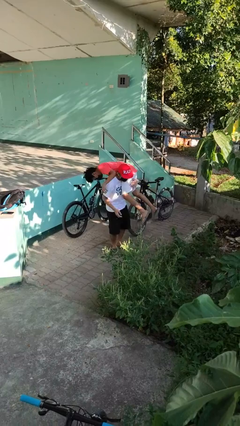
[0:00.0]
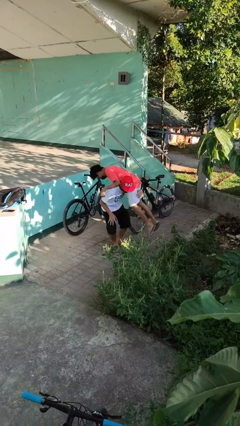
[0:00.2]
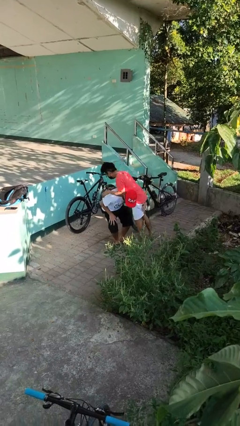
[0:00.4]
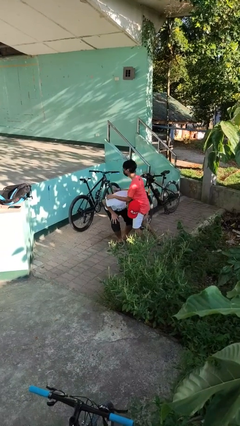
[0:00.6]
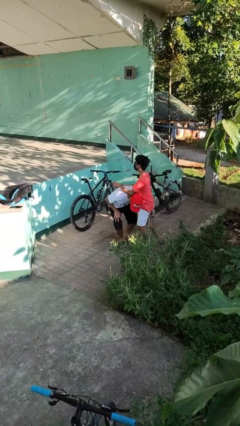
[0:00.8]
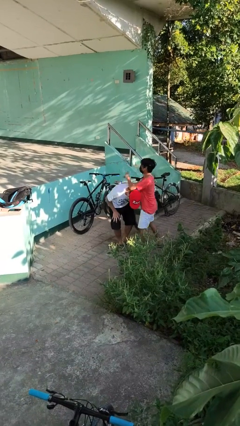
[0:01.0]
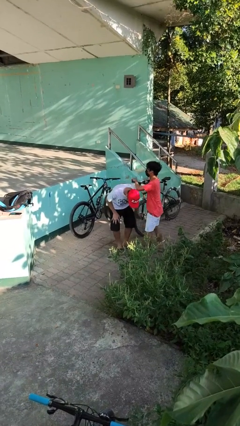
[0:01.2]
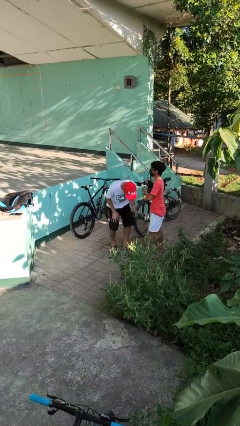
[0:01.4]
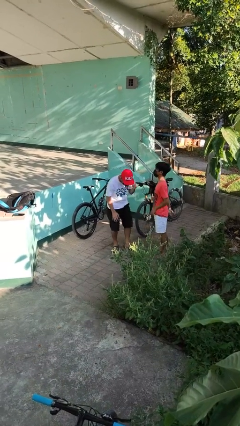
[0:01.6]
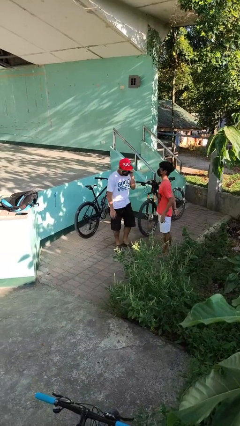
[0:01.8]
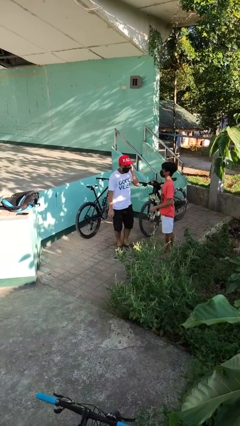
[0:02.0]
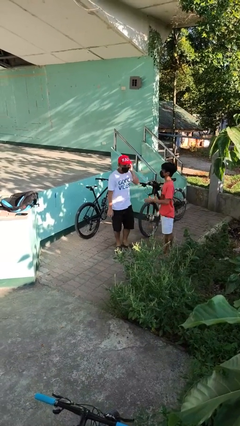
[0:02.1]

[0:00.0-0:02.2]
person puts down person

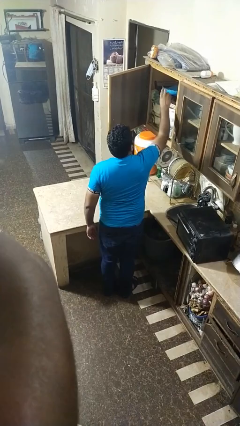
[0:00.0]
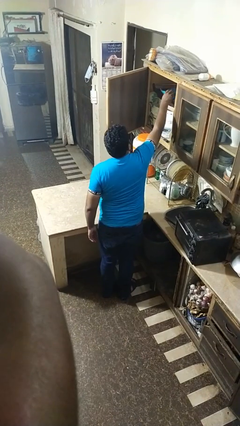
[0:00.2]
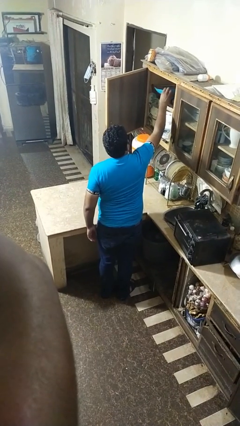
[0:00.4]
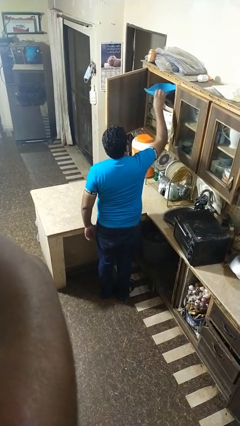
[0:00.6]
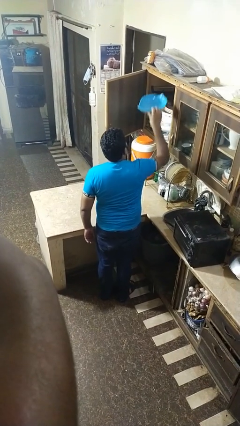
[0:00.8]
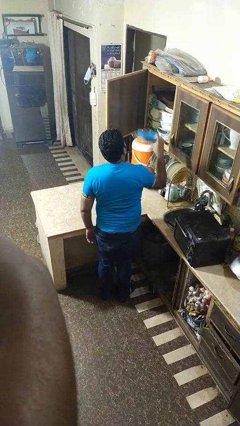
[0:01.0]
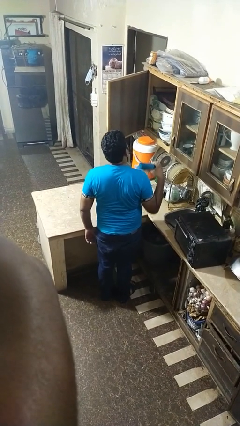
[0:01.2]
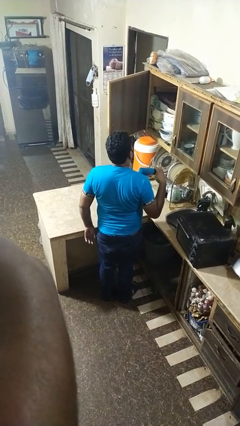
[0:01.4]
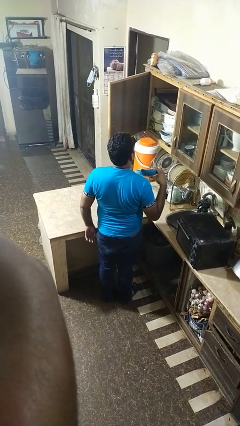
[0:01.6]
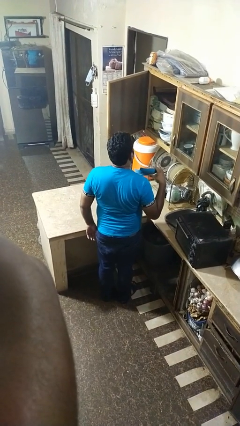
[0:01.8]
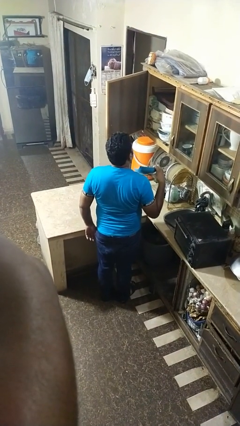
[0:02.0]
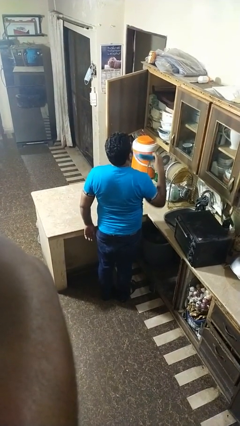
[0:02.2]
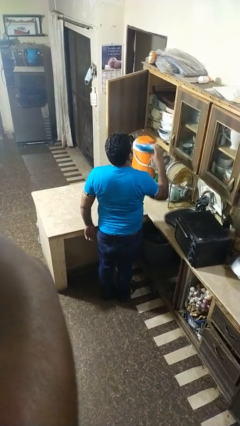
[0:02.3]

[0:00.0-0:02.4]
person puts object in cabinet

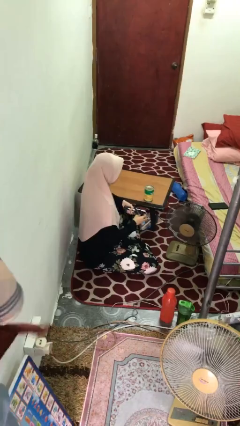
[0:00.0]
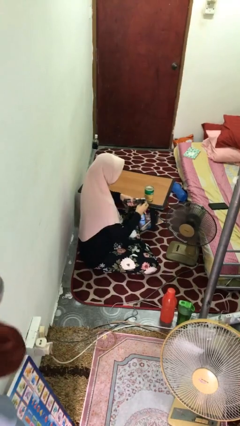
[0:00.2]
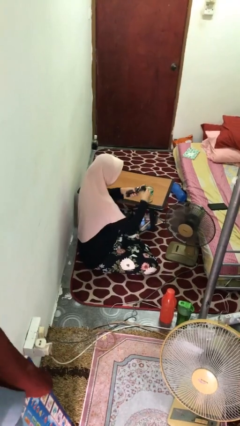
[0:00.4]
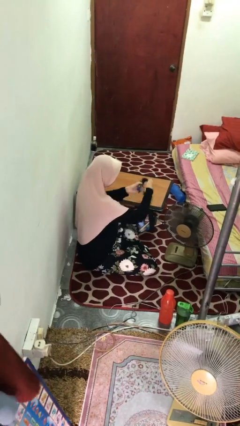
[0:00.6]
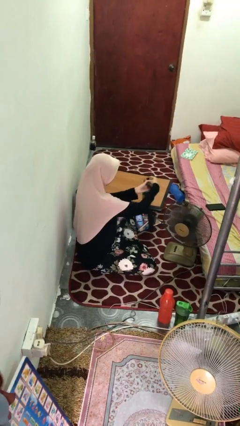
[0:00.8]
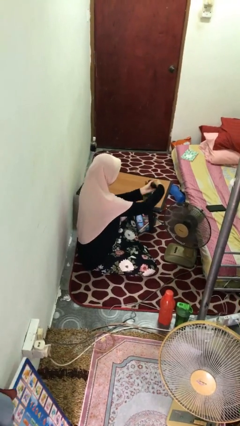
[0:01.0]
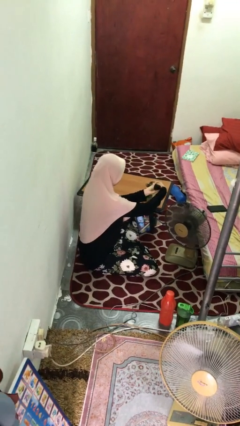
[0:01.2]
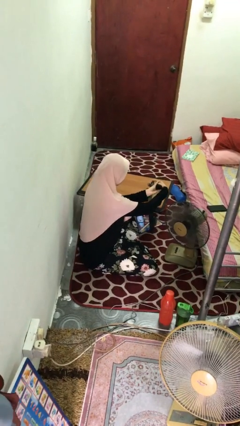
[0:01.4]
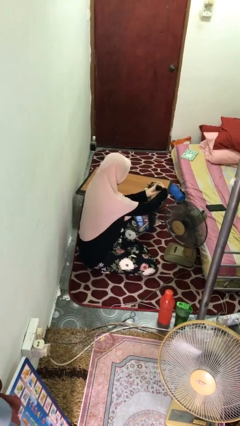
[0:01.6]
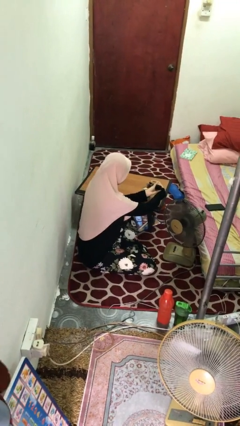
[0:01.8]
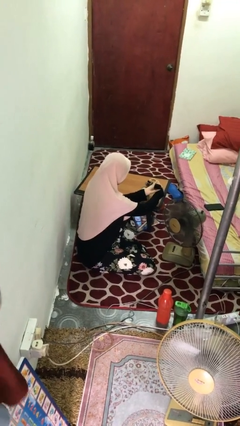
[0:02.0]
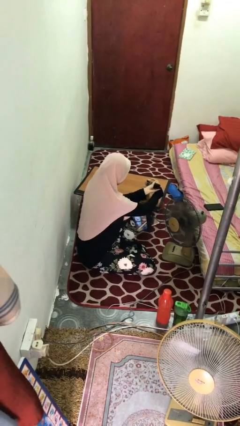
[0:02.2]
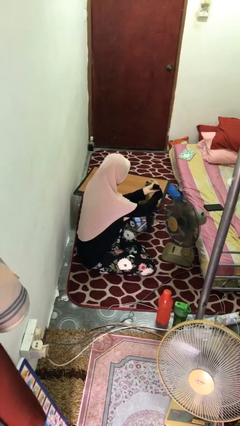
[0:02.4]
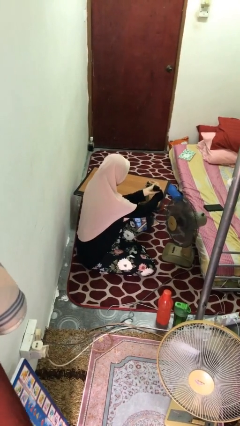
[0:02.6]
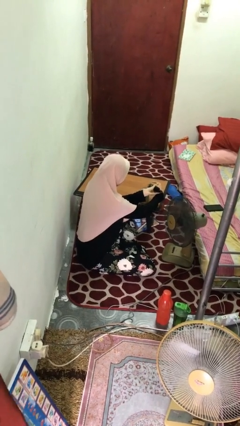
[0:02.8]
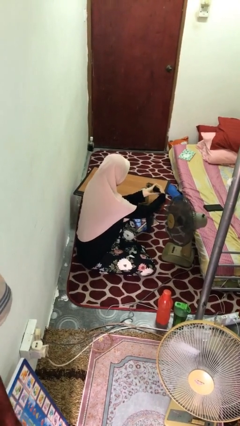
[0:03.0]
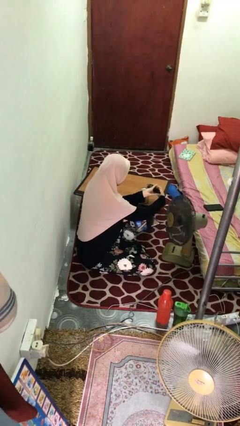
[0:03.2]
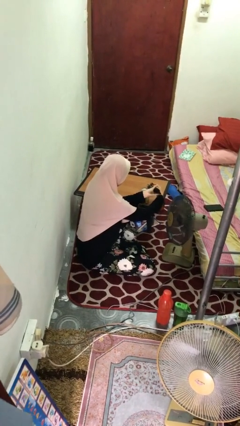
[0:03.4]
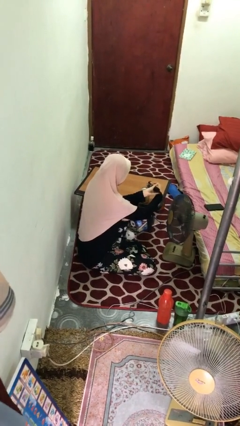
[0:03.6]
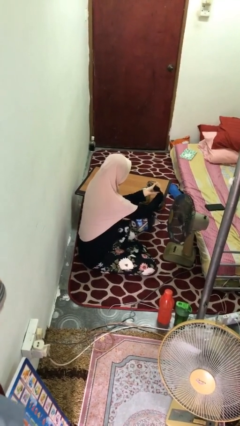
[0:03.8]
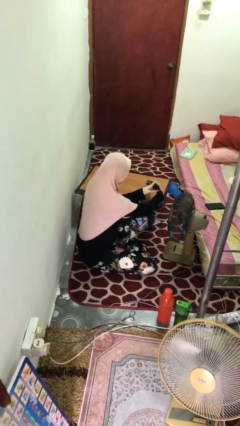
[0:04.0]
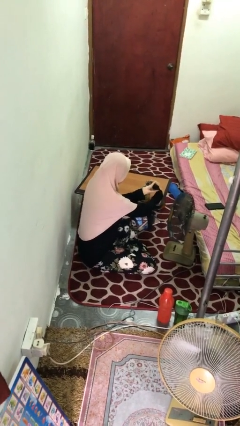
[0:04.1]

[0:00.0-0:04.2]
person opens can with can opener

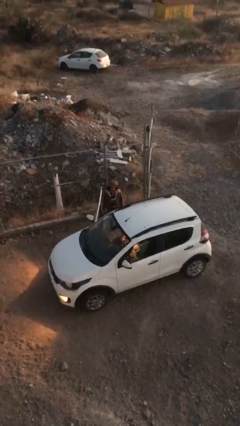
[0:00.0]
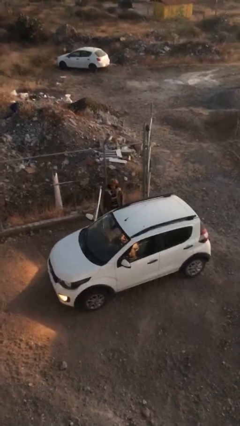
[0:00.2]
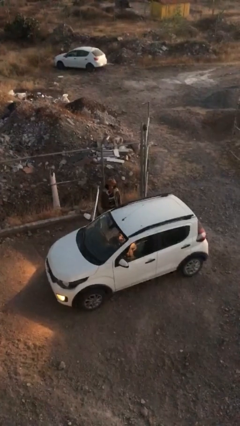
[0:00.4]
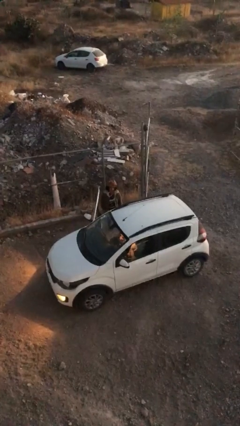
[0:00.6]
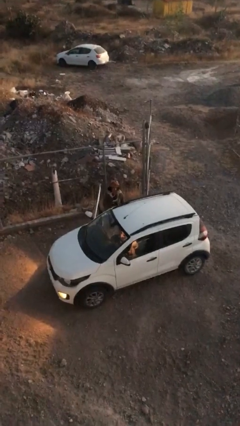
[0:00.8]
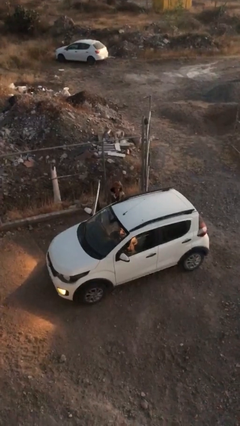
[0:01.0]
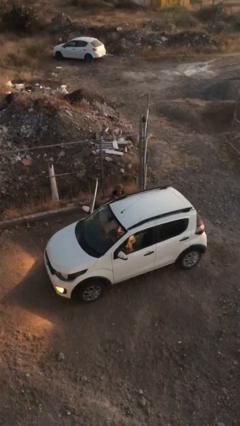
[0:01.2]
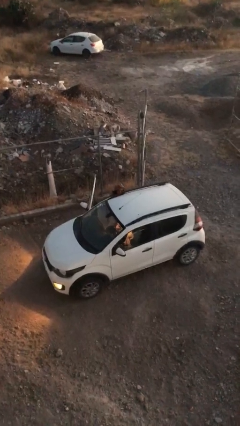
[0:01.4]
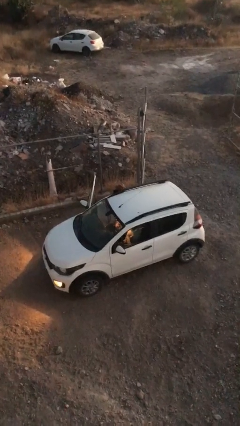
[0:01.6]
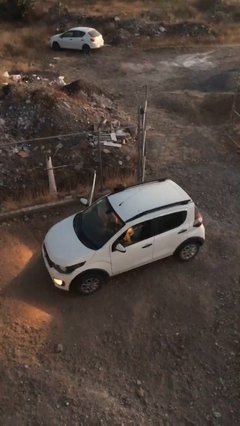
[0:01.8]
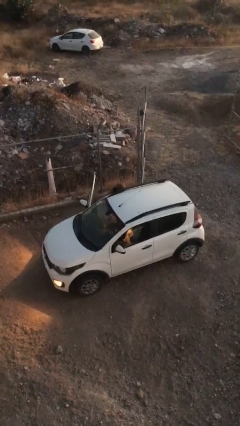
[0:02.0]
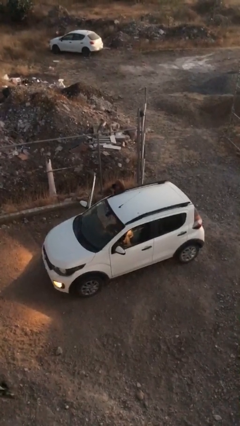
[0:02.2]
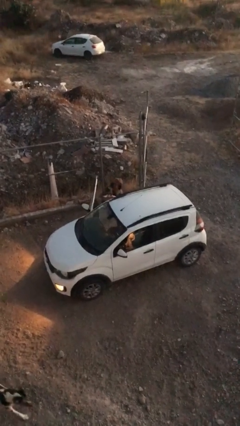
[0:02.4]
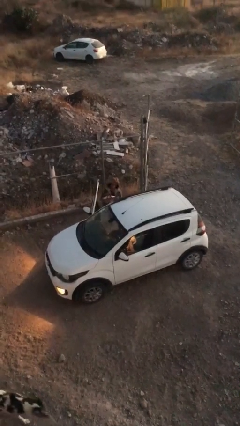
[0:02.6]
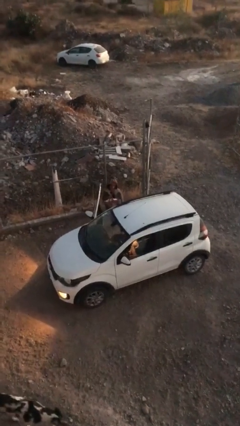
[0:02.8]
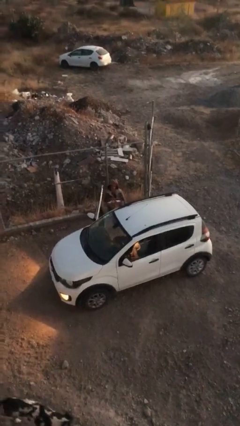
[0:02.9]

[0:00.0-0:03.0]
person unloads car

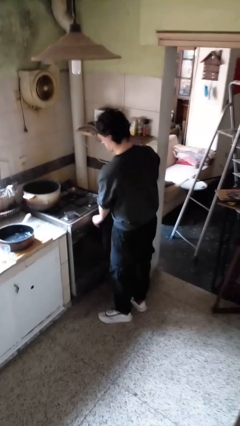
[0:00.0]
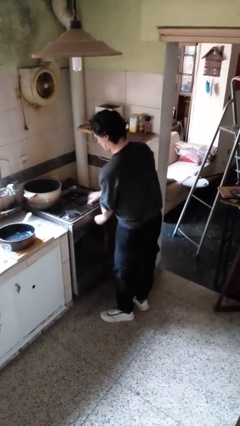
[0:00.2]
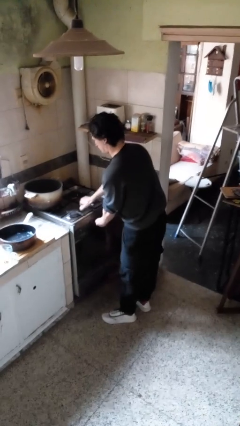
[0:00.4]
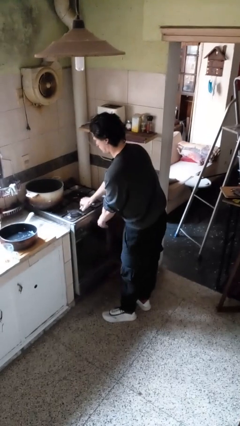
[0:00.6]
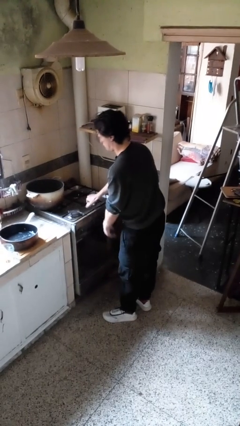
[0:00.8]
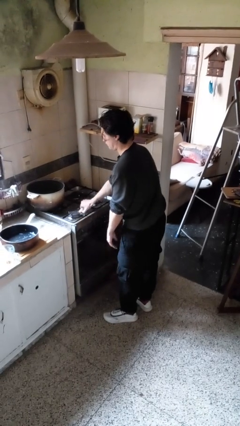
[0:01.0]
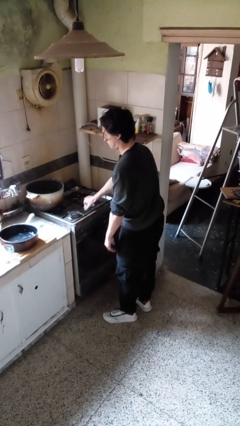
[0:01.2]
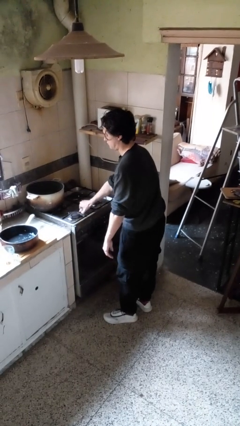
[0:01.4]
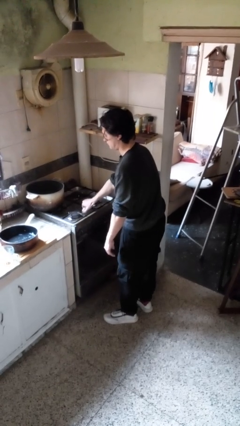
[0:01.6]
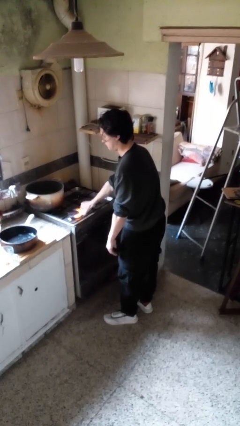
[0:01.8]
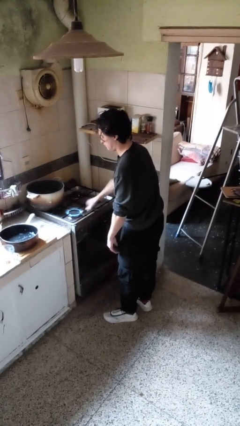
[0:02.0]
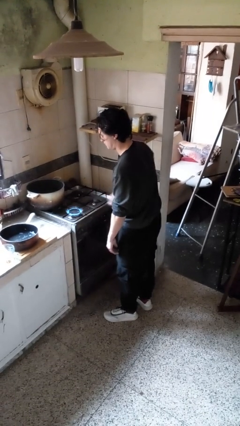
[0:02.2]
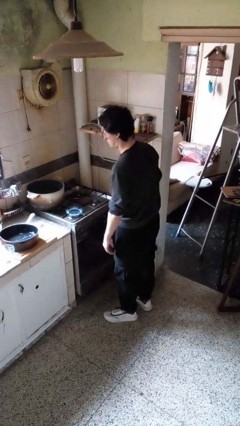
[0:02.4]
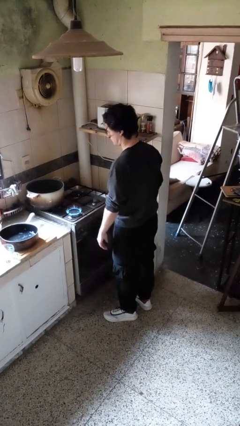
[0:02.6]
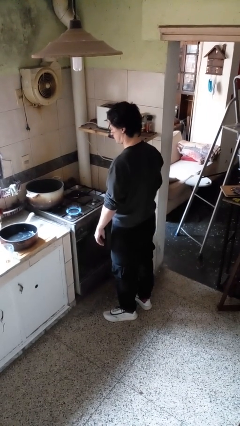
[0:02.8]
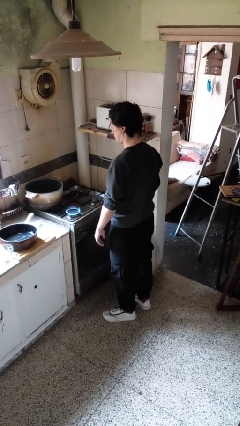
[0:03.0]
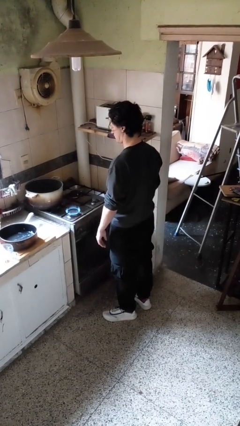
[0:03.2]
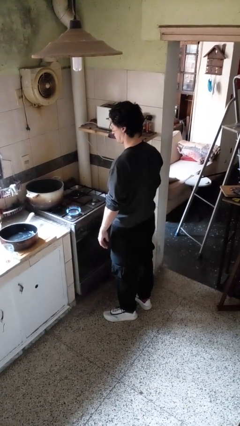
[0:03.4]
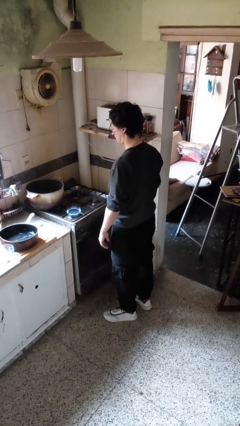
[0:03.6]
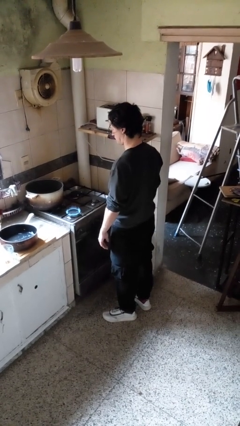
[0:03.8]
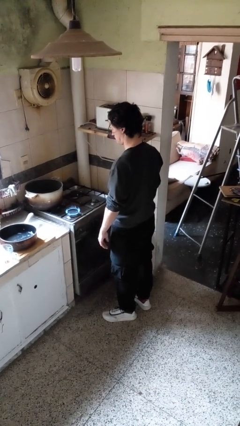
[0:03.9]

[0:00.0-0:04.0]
person turns on stovetop

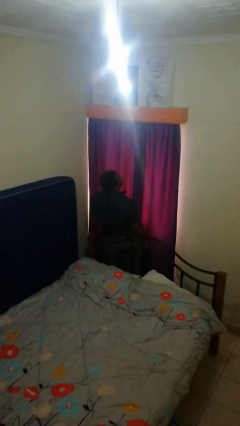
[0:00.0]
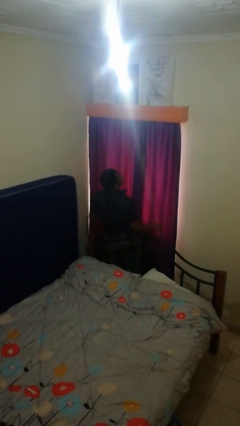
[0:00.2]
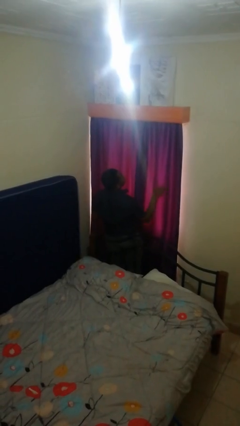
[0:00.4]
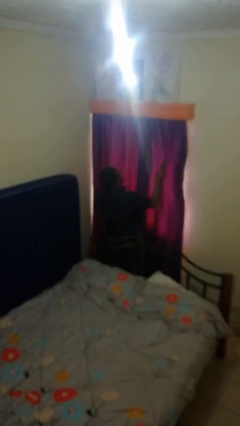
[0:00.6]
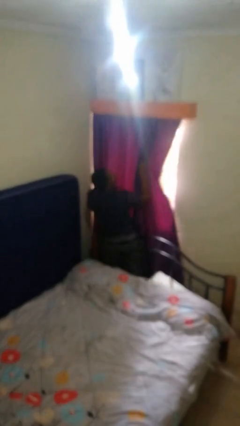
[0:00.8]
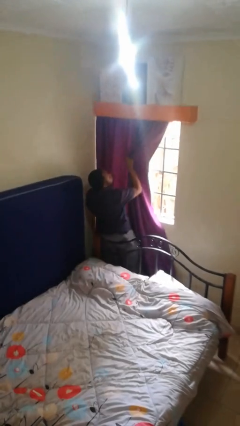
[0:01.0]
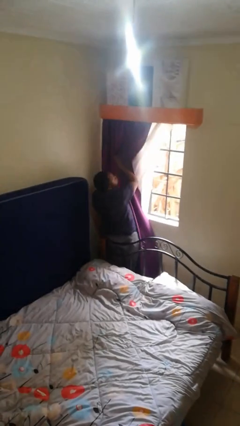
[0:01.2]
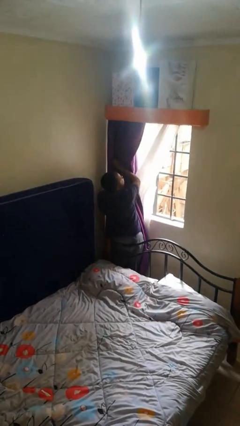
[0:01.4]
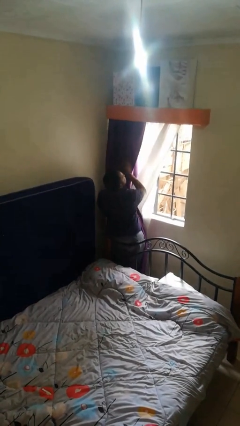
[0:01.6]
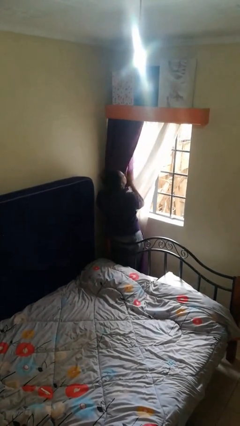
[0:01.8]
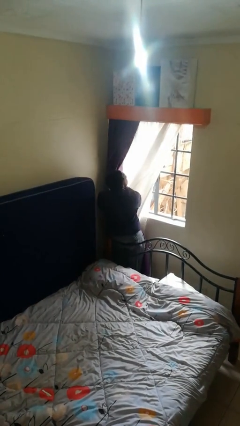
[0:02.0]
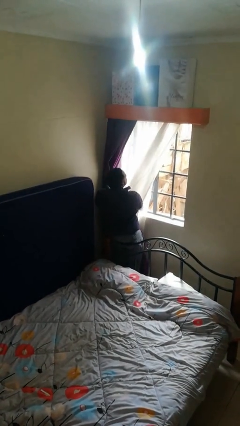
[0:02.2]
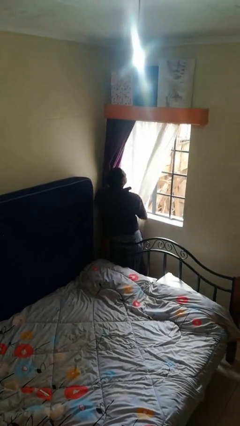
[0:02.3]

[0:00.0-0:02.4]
person opens curtains
